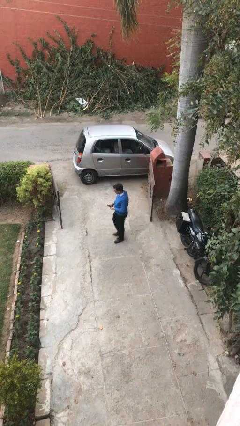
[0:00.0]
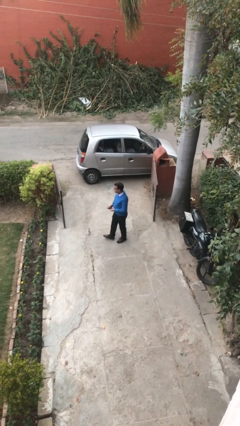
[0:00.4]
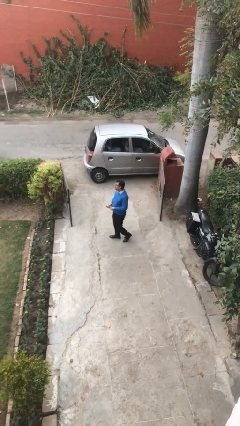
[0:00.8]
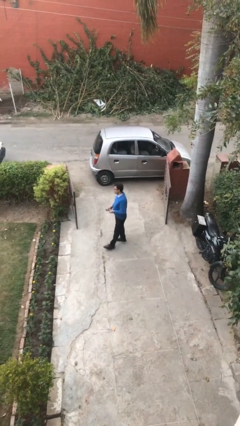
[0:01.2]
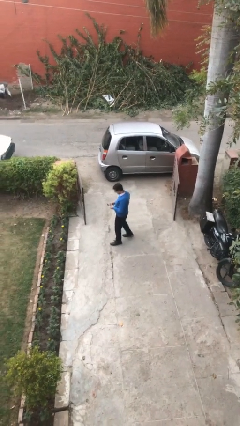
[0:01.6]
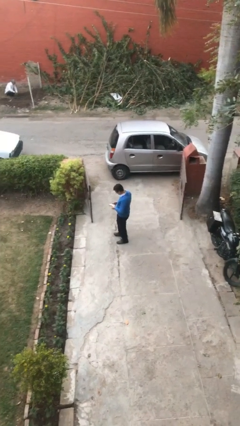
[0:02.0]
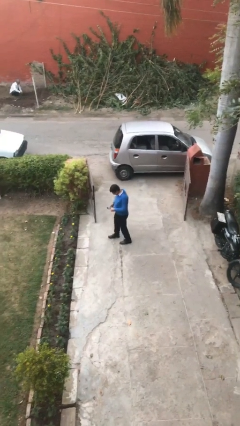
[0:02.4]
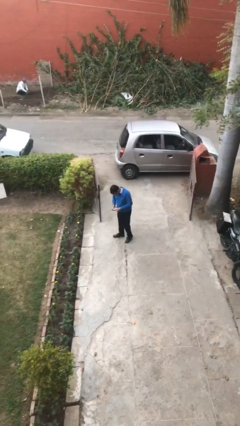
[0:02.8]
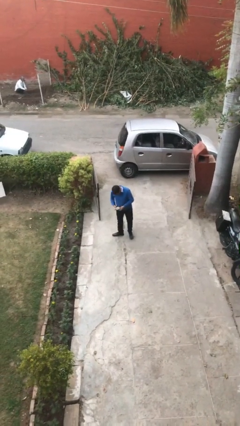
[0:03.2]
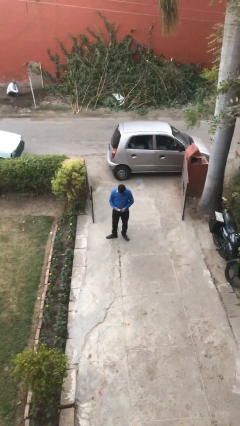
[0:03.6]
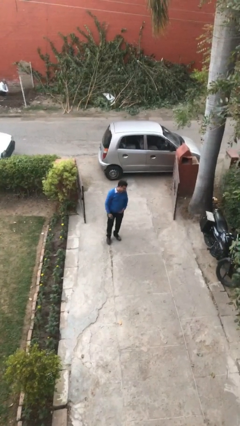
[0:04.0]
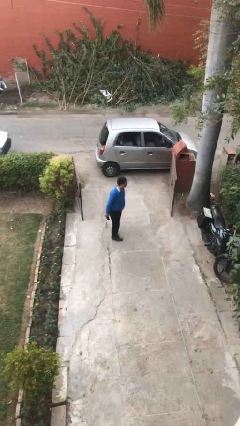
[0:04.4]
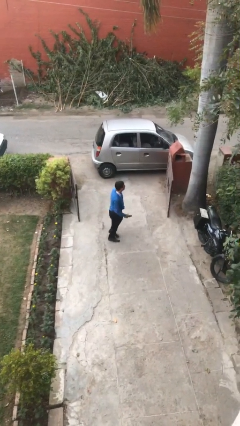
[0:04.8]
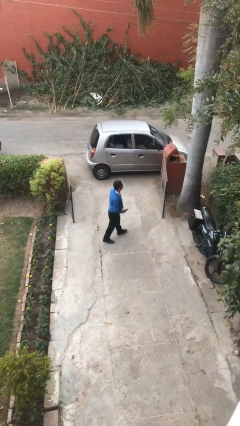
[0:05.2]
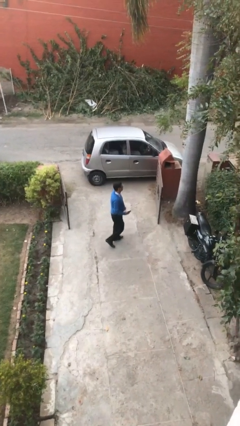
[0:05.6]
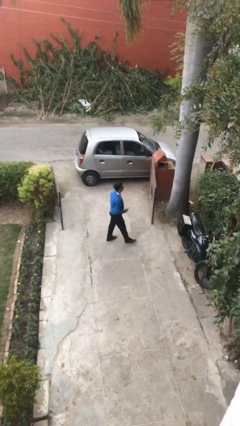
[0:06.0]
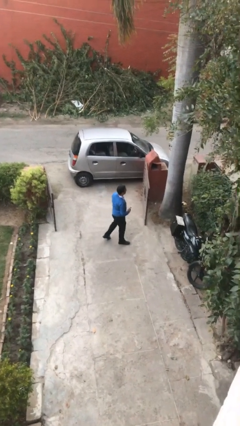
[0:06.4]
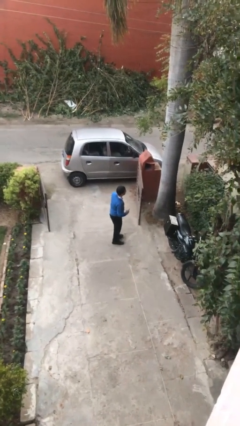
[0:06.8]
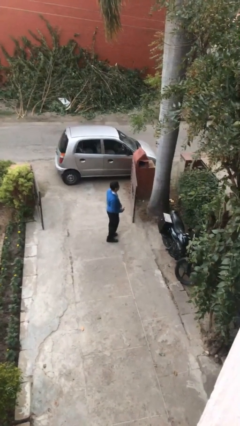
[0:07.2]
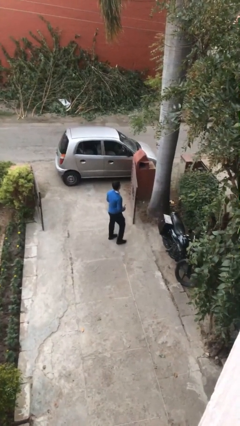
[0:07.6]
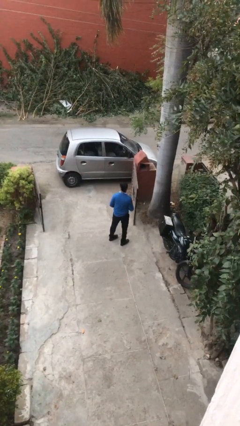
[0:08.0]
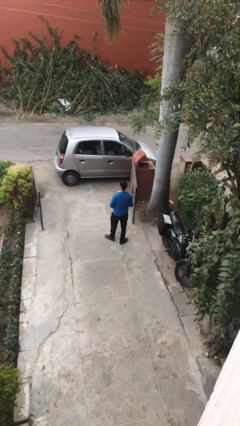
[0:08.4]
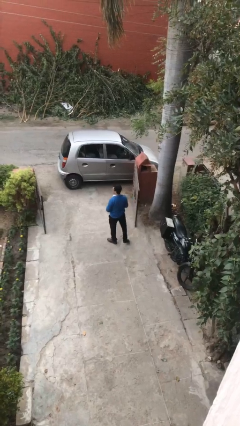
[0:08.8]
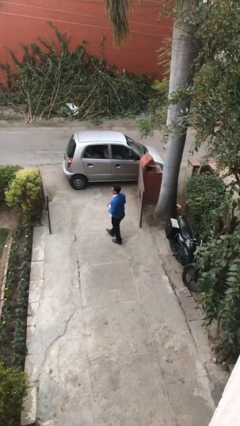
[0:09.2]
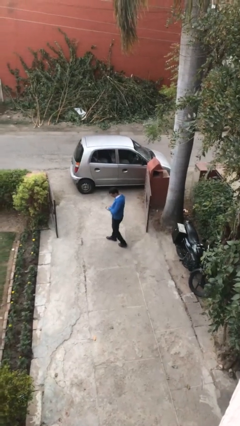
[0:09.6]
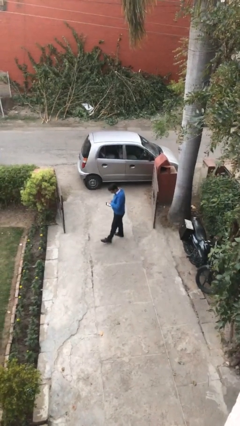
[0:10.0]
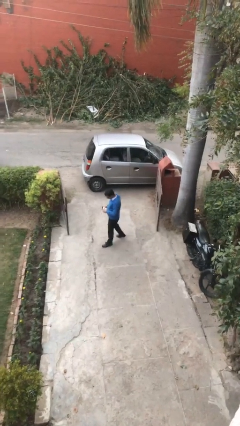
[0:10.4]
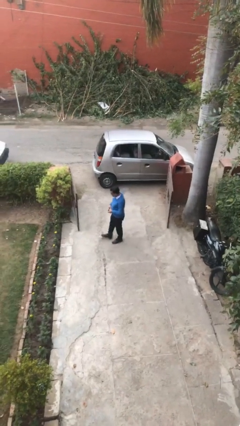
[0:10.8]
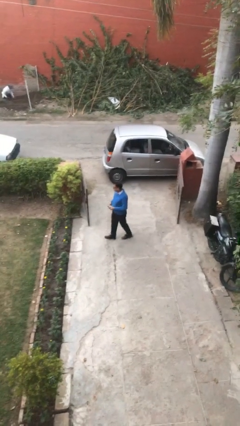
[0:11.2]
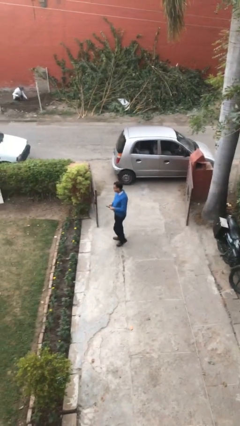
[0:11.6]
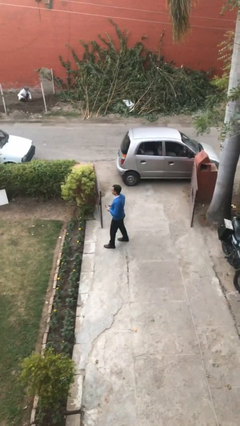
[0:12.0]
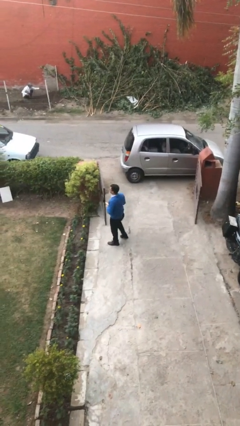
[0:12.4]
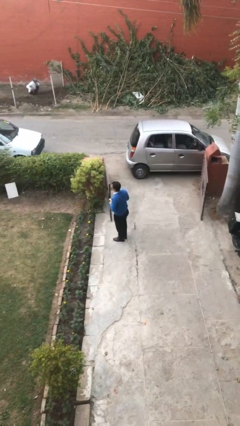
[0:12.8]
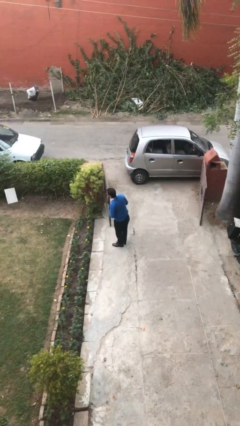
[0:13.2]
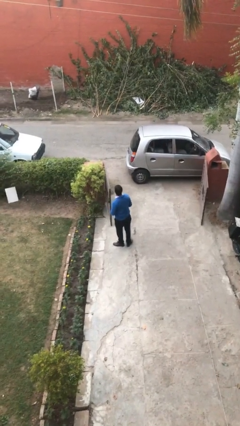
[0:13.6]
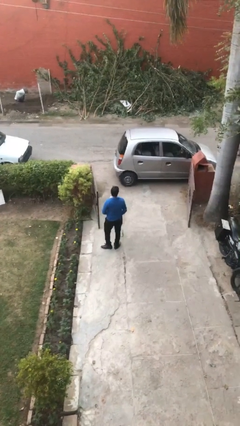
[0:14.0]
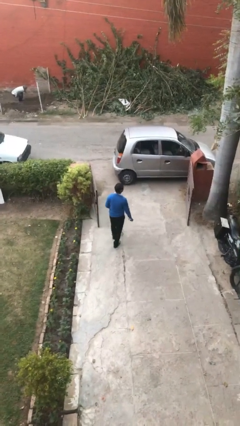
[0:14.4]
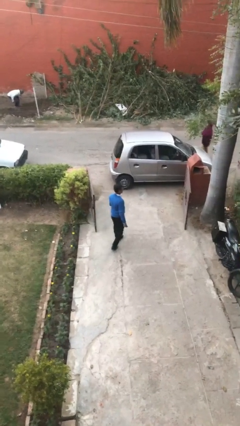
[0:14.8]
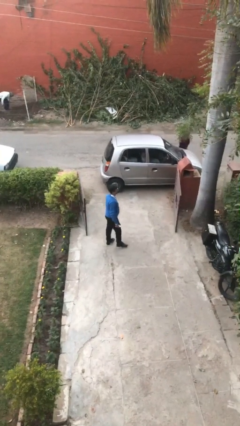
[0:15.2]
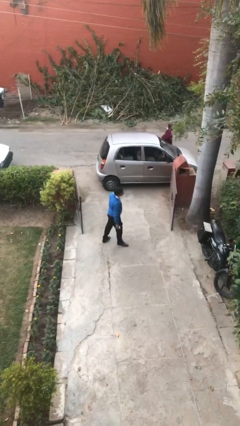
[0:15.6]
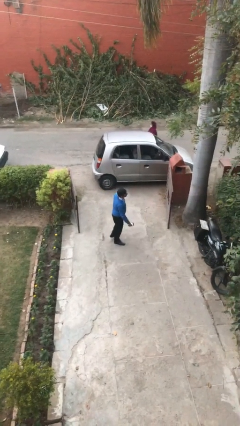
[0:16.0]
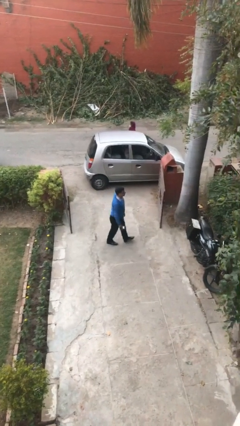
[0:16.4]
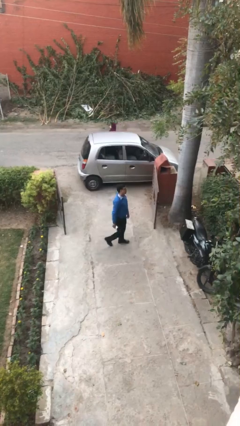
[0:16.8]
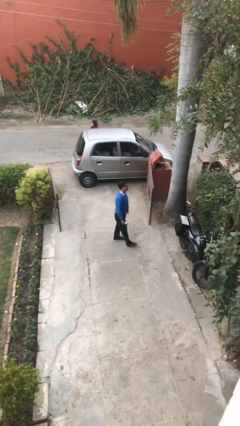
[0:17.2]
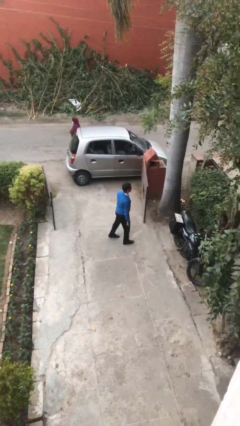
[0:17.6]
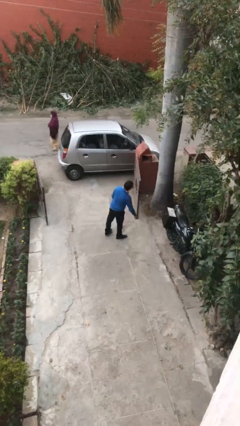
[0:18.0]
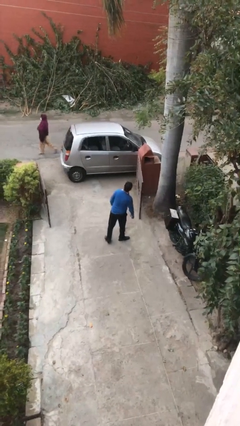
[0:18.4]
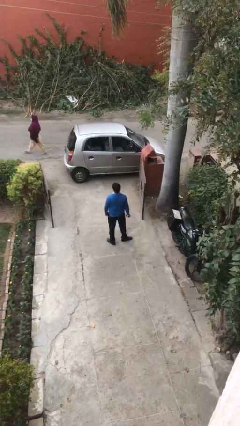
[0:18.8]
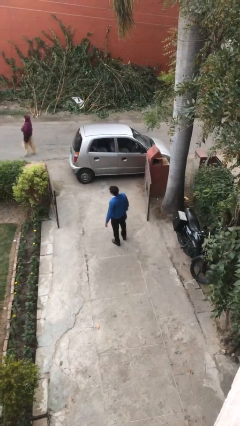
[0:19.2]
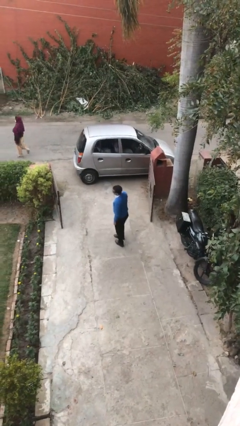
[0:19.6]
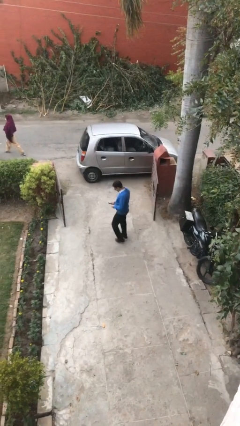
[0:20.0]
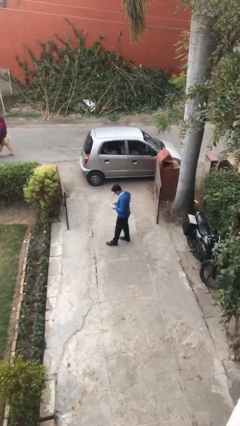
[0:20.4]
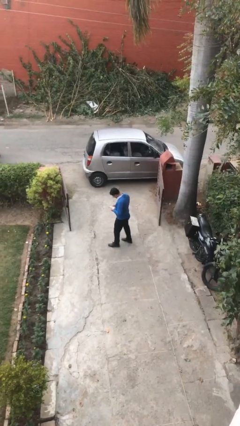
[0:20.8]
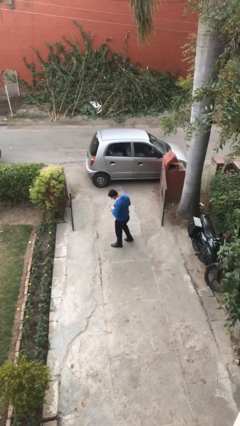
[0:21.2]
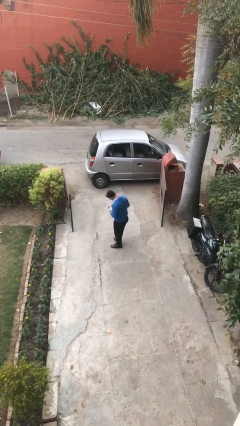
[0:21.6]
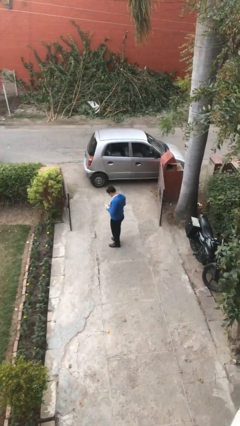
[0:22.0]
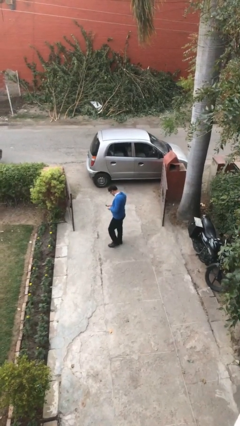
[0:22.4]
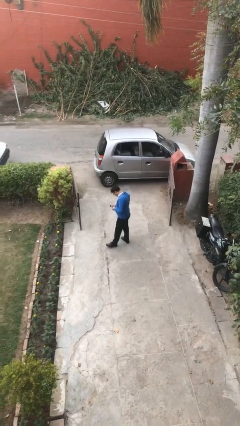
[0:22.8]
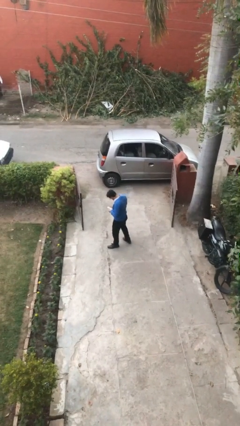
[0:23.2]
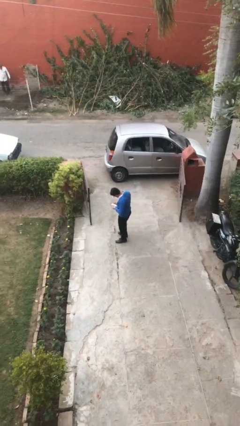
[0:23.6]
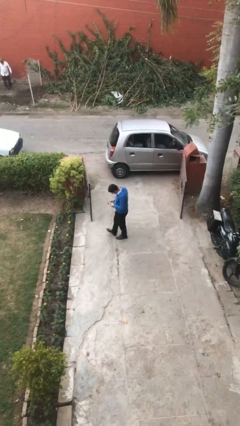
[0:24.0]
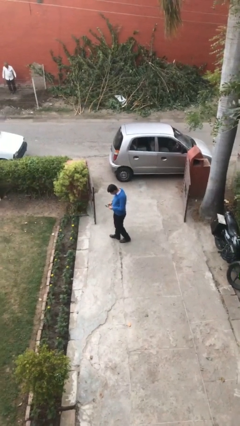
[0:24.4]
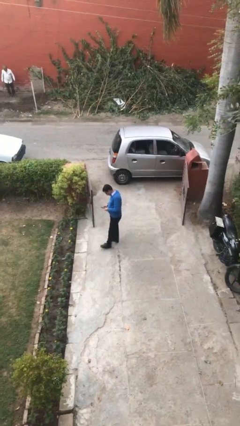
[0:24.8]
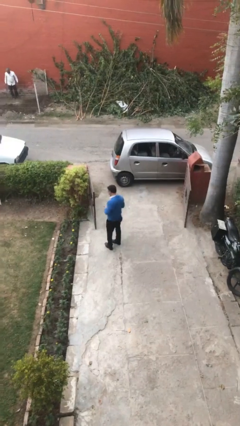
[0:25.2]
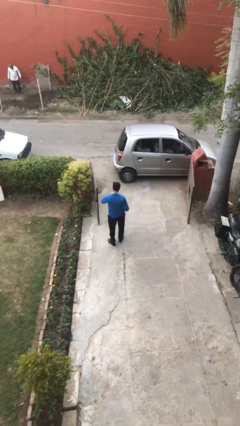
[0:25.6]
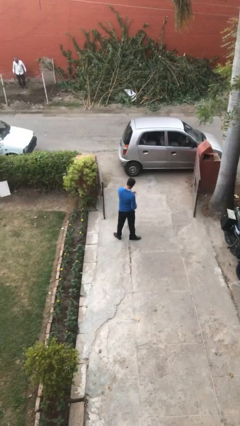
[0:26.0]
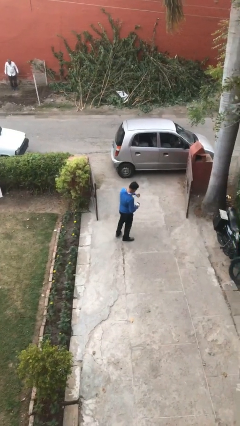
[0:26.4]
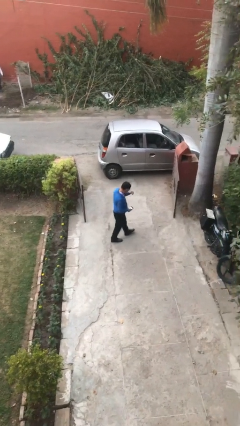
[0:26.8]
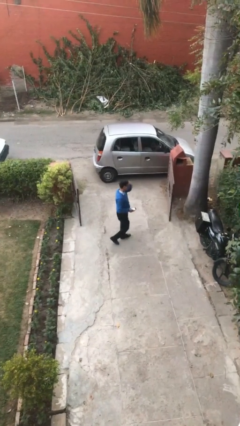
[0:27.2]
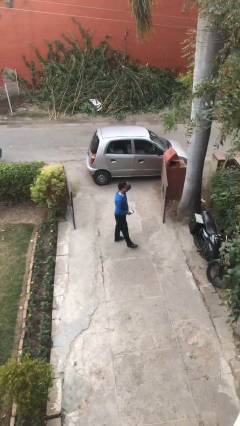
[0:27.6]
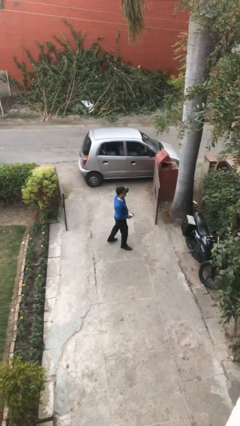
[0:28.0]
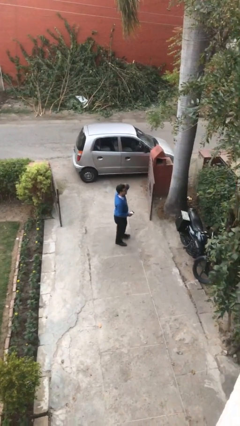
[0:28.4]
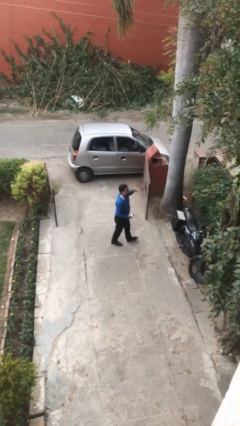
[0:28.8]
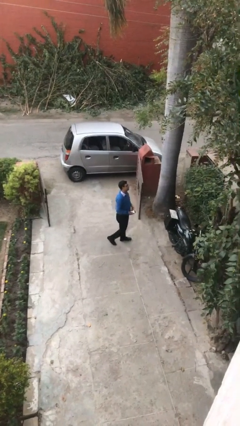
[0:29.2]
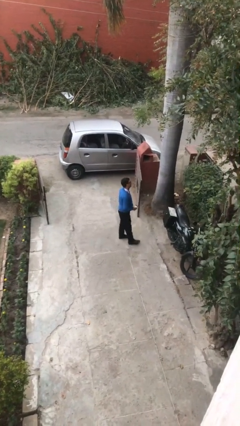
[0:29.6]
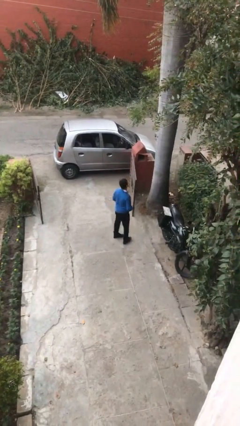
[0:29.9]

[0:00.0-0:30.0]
person walks

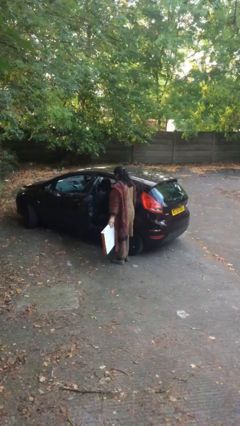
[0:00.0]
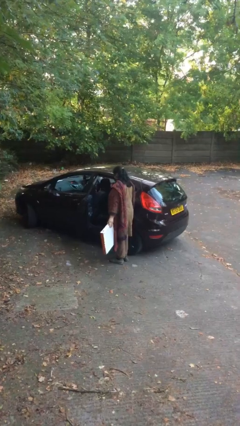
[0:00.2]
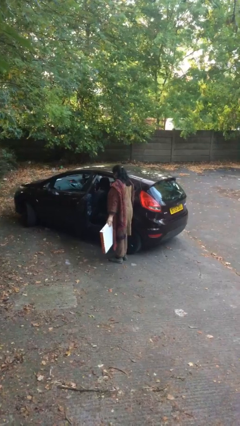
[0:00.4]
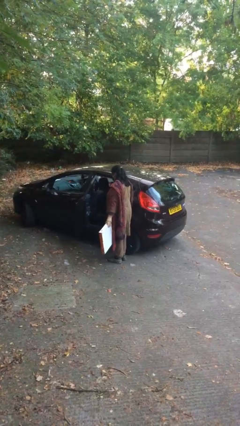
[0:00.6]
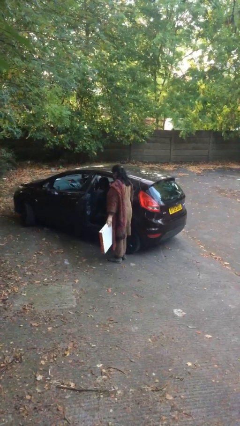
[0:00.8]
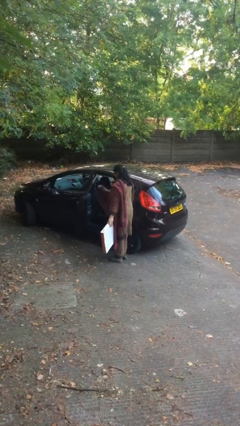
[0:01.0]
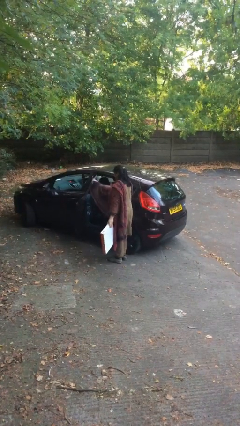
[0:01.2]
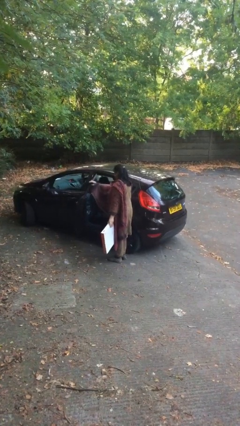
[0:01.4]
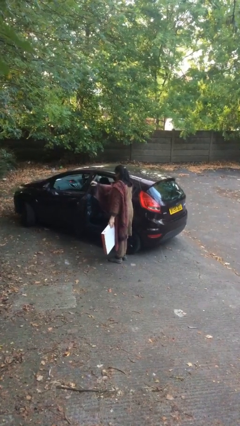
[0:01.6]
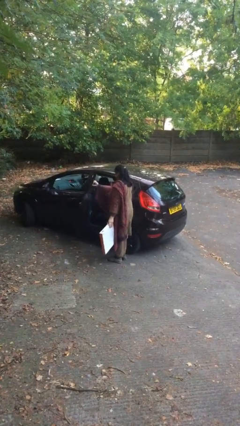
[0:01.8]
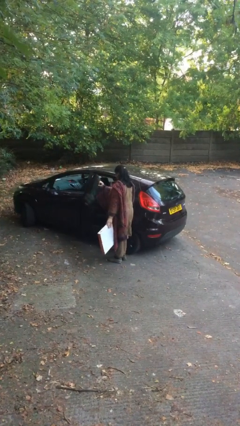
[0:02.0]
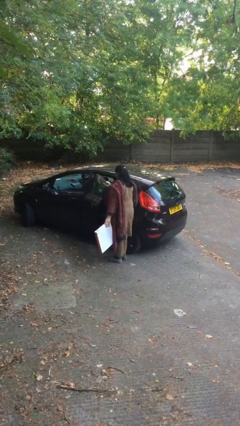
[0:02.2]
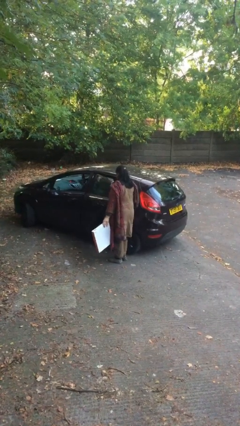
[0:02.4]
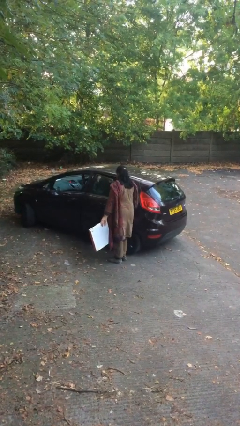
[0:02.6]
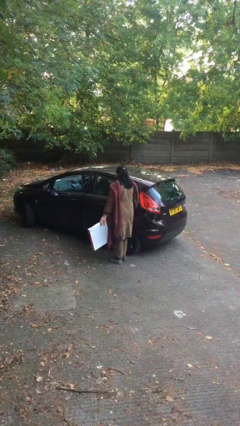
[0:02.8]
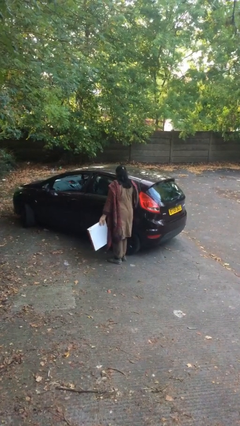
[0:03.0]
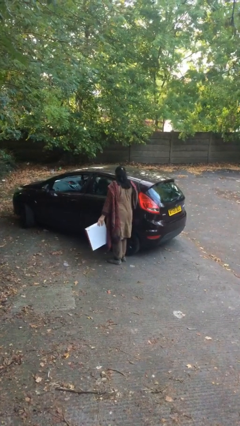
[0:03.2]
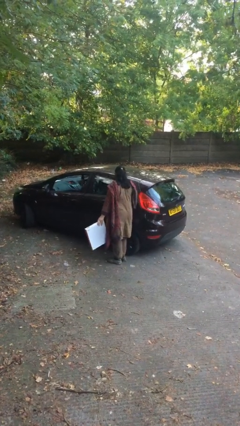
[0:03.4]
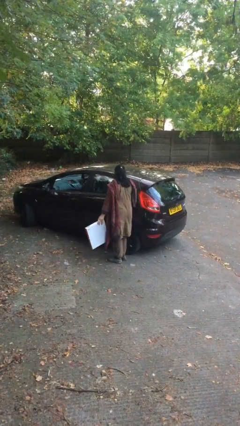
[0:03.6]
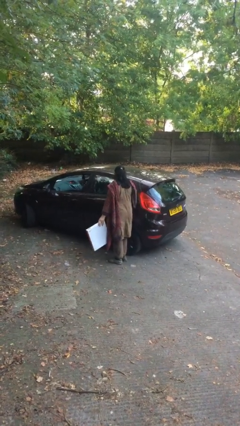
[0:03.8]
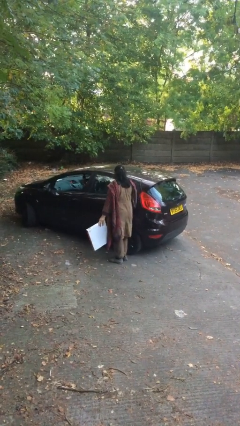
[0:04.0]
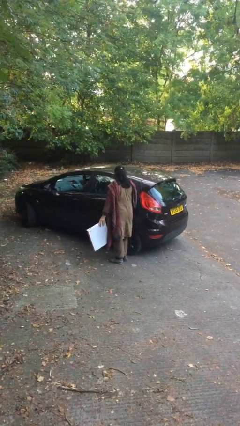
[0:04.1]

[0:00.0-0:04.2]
person closes car door
